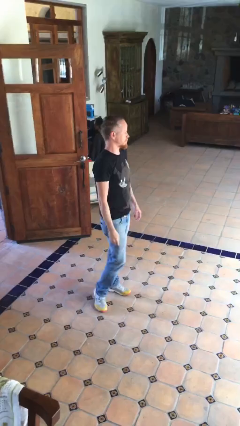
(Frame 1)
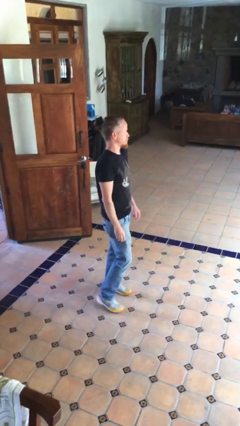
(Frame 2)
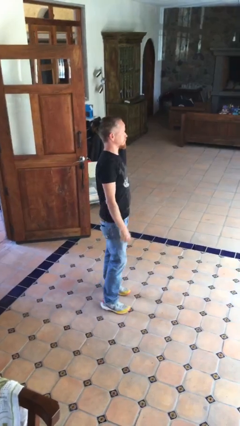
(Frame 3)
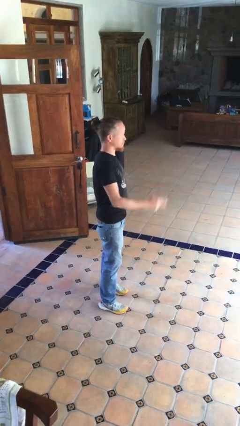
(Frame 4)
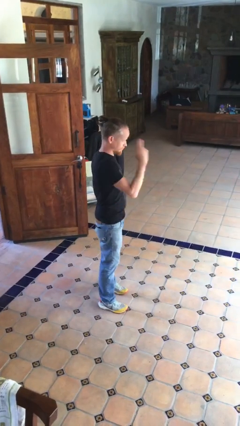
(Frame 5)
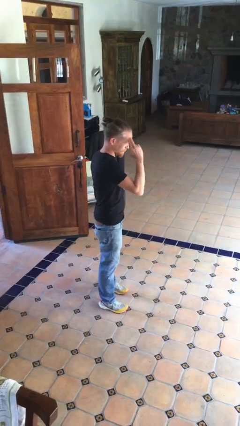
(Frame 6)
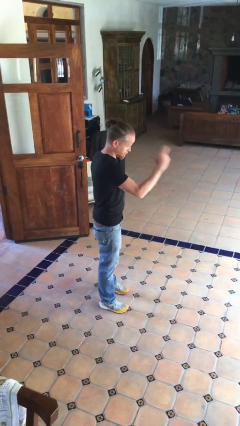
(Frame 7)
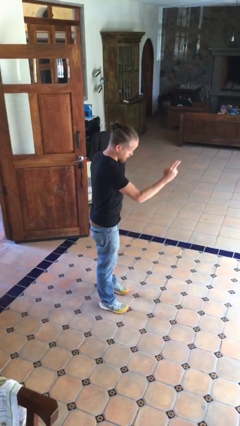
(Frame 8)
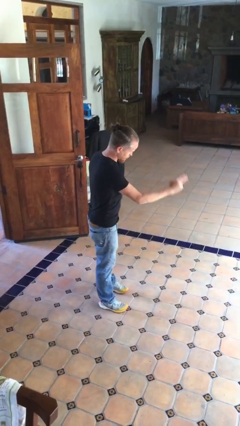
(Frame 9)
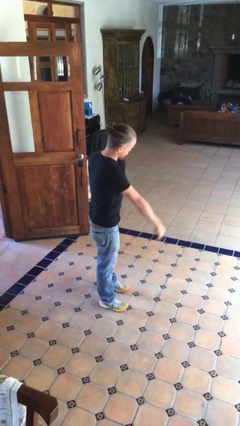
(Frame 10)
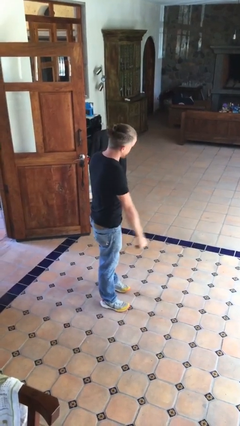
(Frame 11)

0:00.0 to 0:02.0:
person salutes

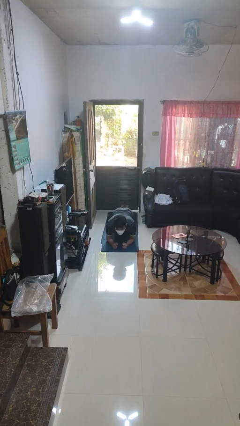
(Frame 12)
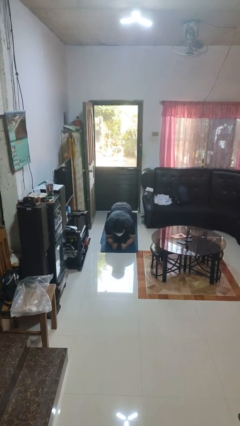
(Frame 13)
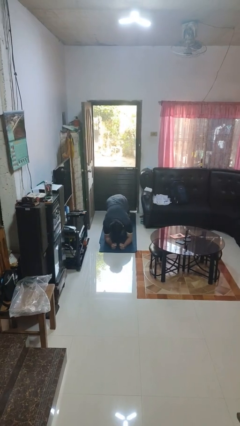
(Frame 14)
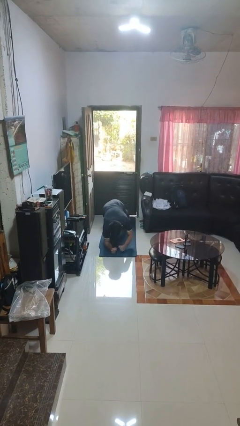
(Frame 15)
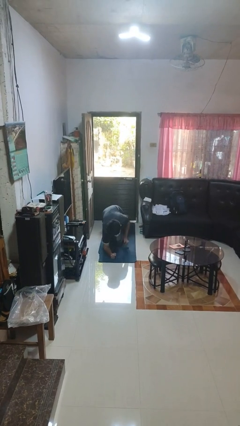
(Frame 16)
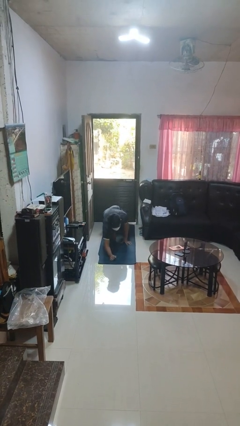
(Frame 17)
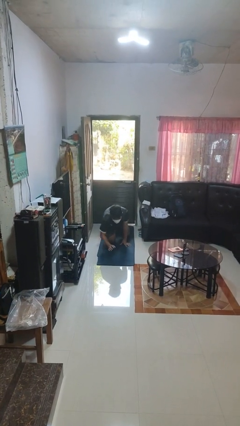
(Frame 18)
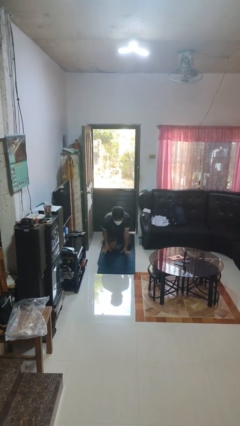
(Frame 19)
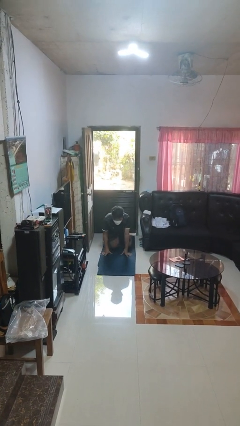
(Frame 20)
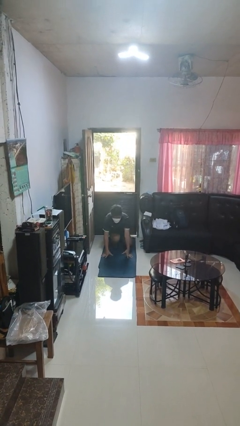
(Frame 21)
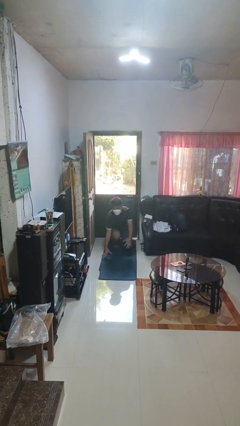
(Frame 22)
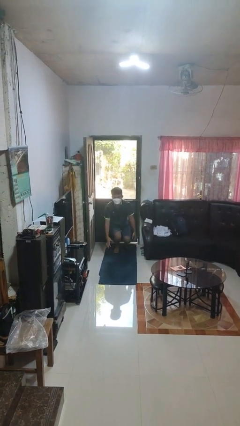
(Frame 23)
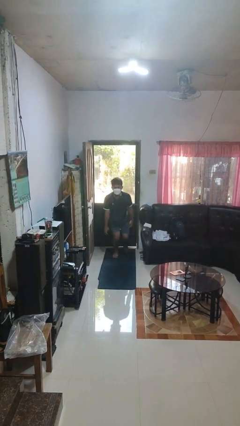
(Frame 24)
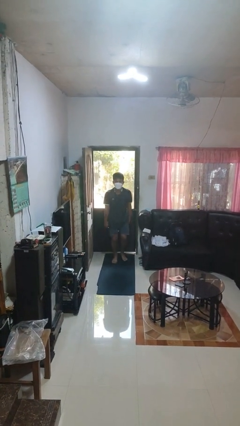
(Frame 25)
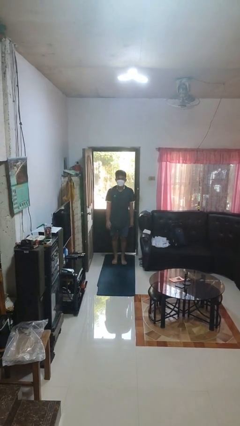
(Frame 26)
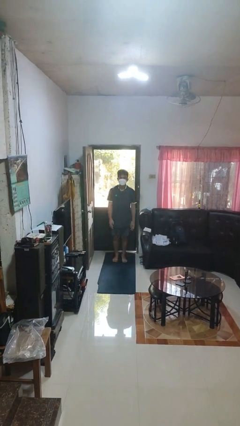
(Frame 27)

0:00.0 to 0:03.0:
person stands up from floor

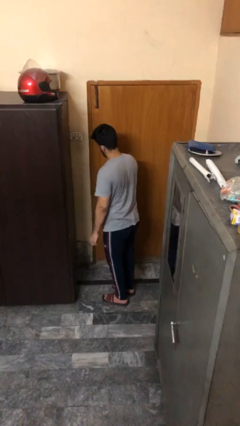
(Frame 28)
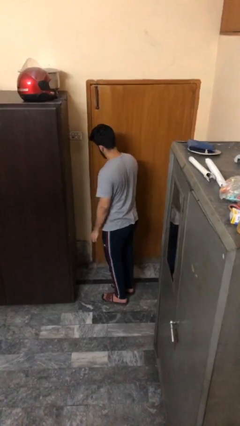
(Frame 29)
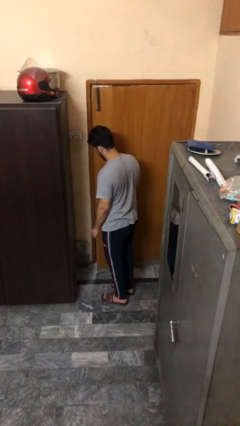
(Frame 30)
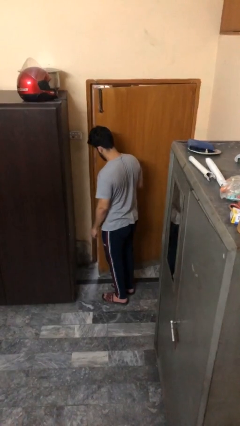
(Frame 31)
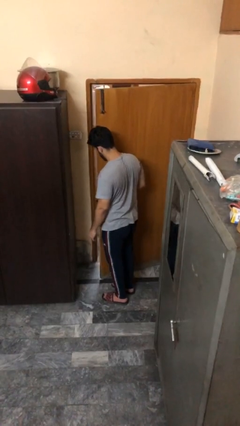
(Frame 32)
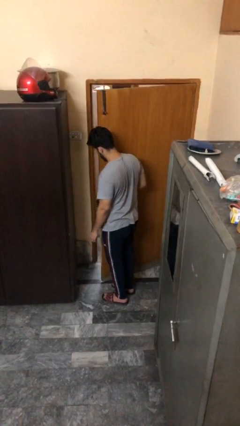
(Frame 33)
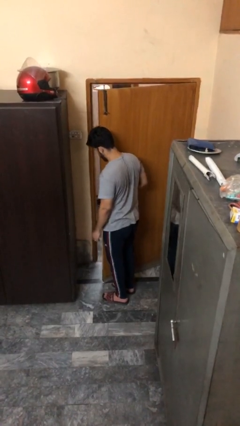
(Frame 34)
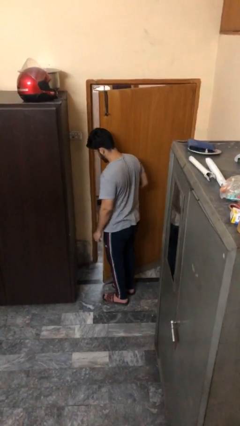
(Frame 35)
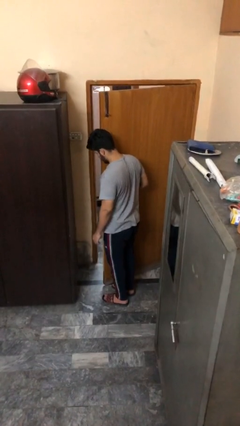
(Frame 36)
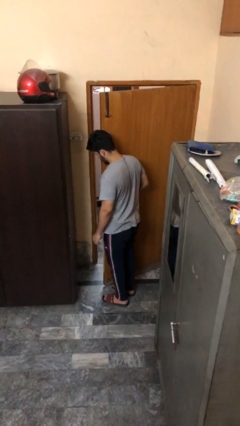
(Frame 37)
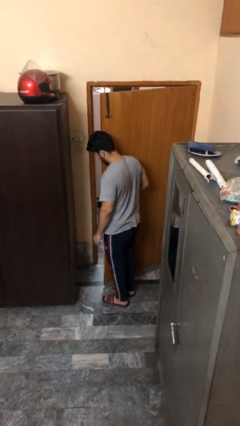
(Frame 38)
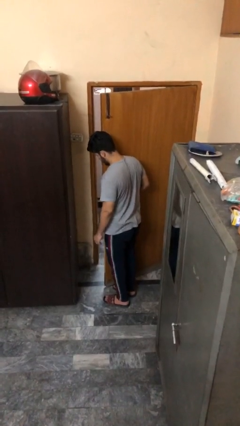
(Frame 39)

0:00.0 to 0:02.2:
person opens facility door

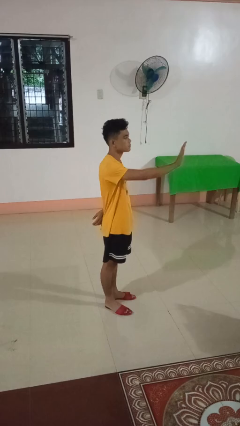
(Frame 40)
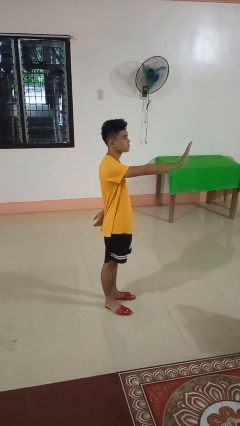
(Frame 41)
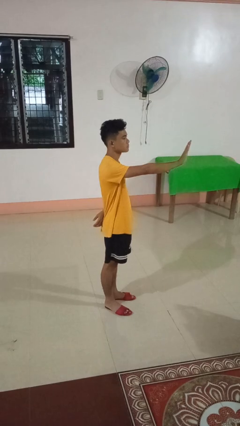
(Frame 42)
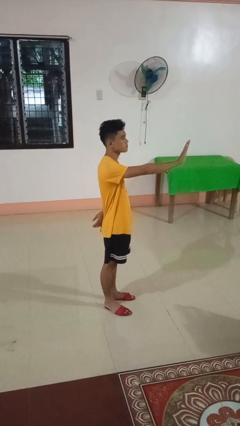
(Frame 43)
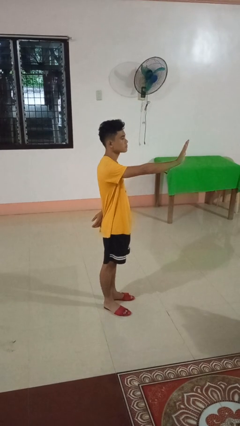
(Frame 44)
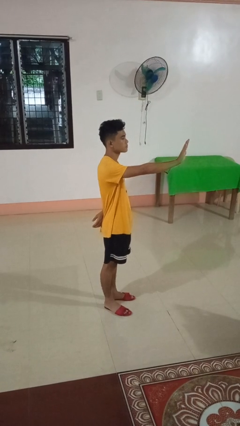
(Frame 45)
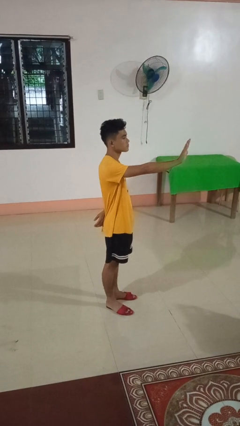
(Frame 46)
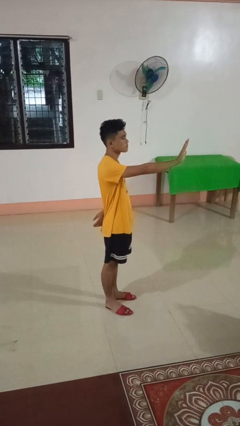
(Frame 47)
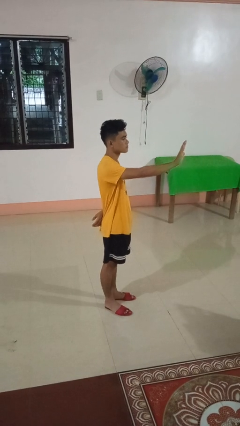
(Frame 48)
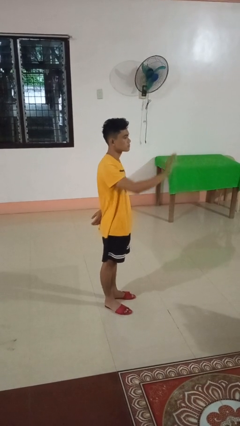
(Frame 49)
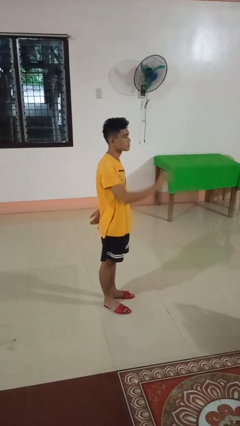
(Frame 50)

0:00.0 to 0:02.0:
person gestures stop

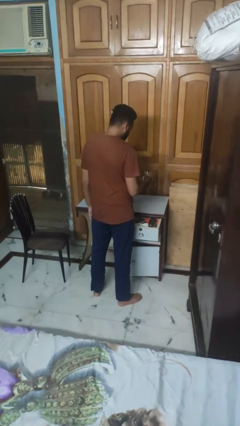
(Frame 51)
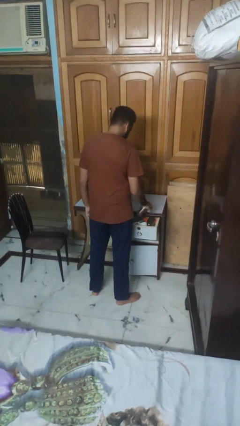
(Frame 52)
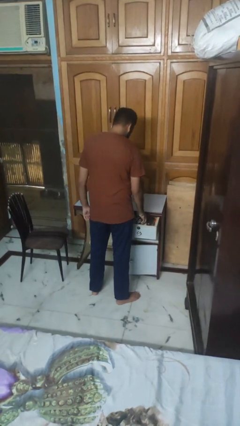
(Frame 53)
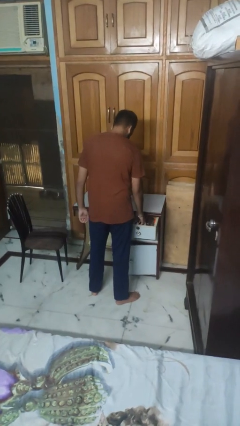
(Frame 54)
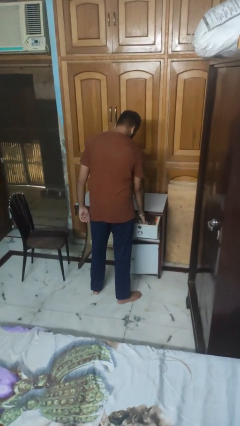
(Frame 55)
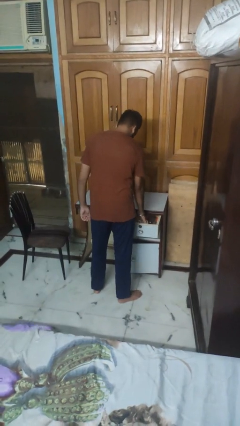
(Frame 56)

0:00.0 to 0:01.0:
person puts object into kitchen drawer

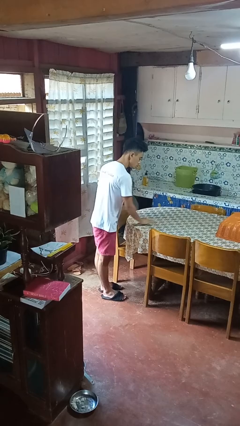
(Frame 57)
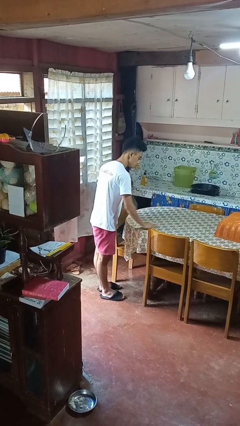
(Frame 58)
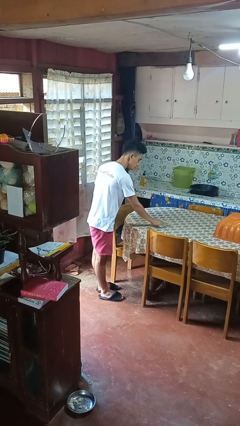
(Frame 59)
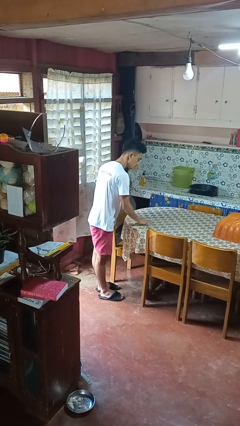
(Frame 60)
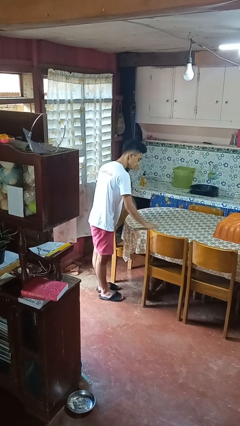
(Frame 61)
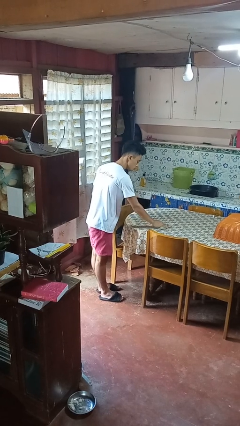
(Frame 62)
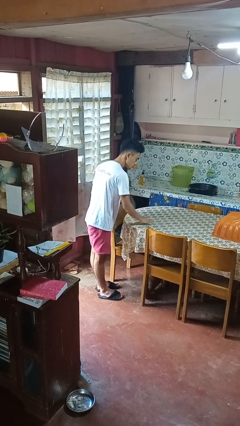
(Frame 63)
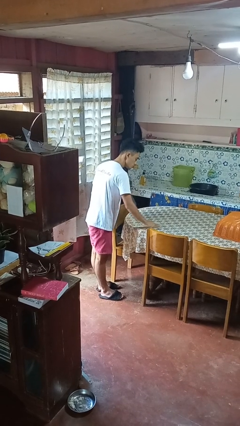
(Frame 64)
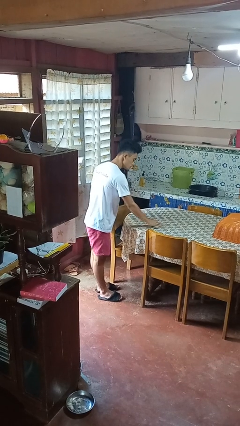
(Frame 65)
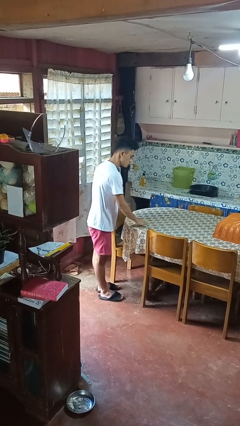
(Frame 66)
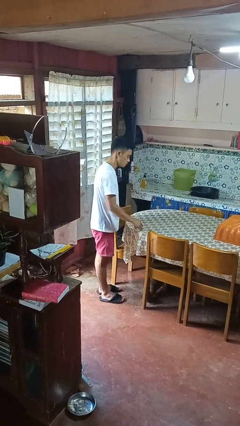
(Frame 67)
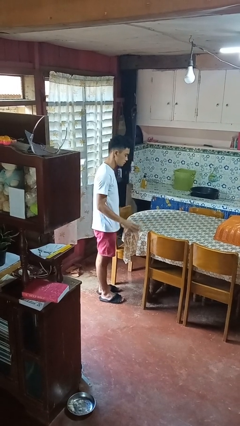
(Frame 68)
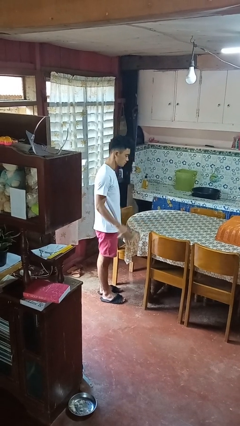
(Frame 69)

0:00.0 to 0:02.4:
person cleans table with rag

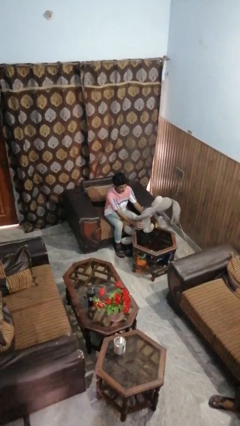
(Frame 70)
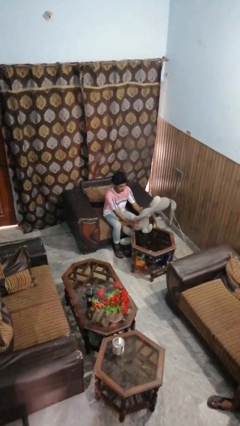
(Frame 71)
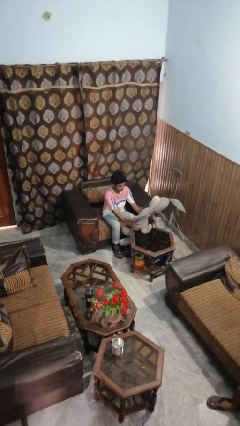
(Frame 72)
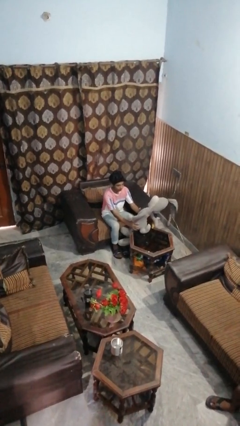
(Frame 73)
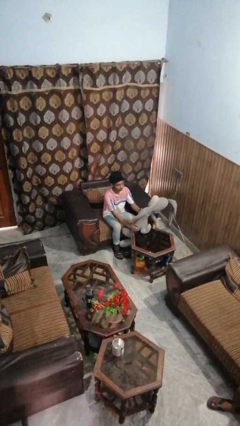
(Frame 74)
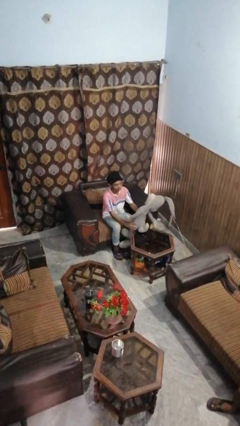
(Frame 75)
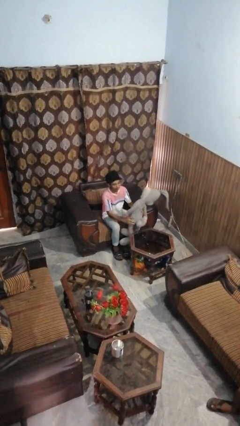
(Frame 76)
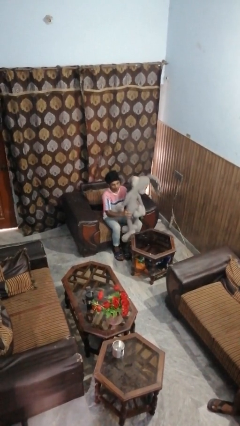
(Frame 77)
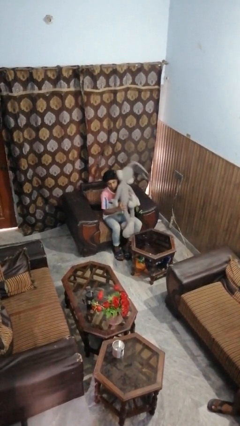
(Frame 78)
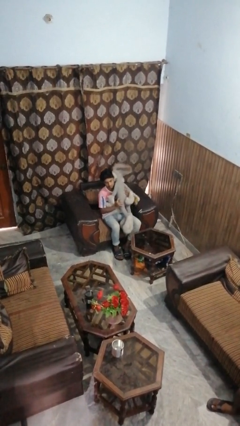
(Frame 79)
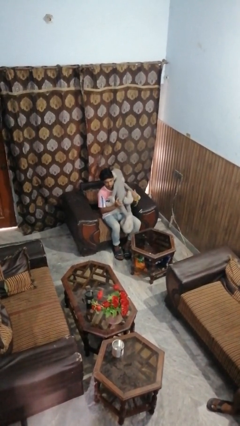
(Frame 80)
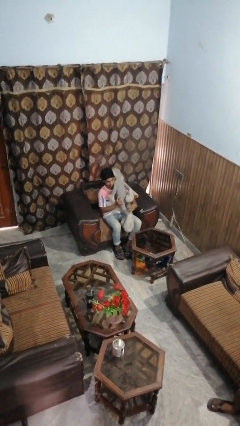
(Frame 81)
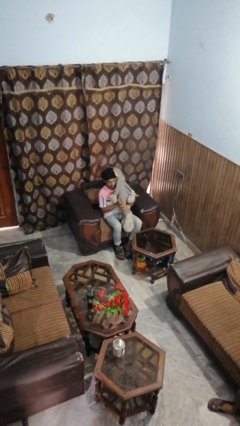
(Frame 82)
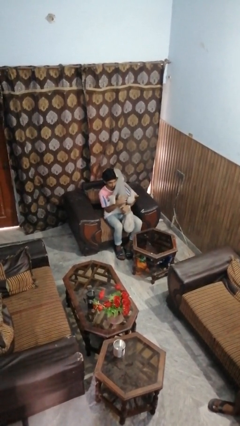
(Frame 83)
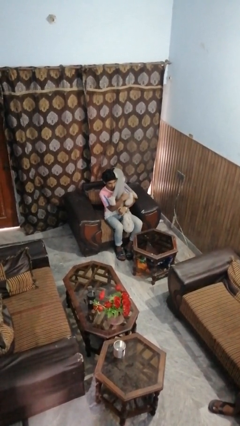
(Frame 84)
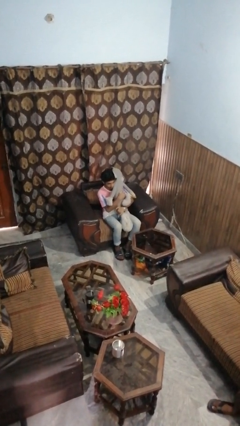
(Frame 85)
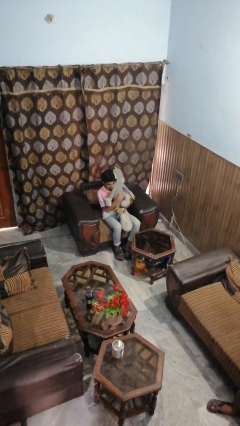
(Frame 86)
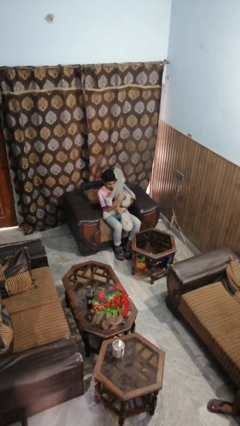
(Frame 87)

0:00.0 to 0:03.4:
person hugs stuffed animal

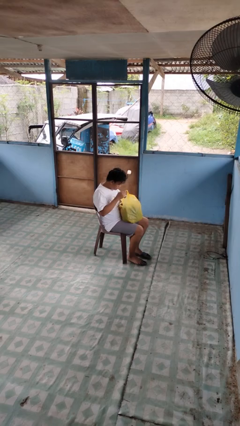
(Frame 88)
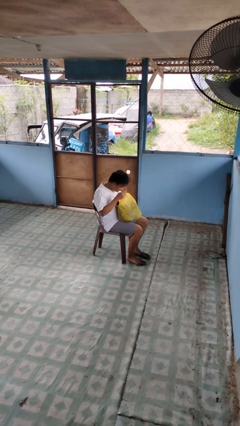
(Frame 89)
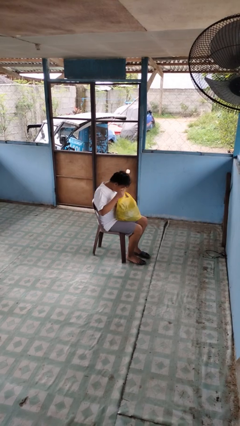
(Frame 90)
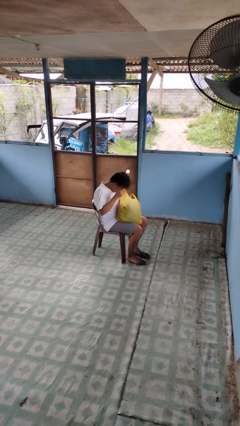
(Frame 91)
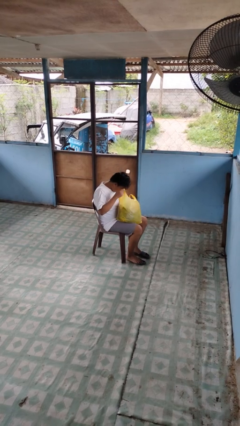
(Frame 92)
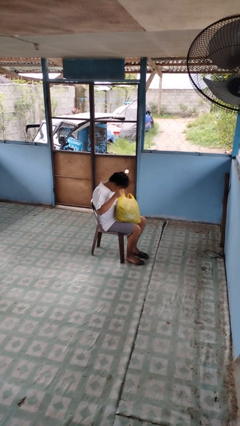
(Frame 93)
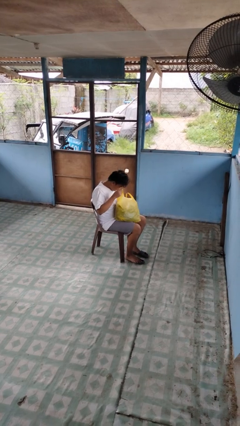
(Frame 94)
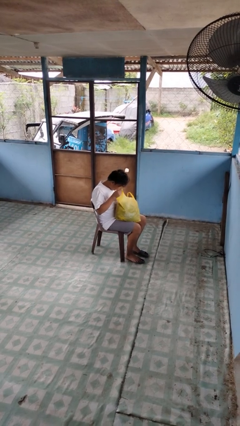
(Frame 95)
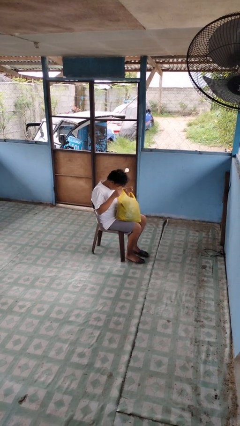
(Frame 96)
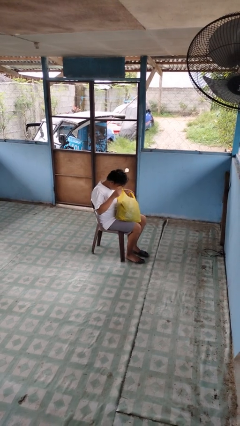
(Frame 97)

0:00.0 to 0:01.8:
person searches in bag
